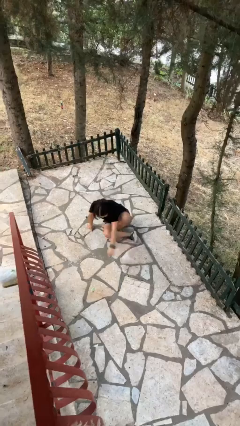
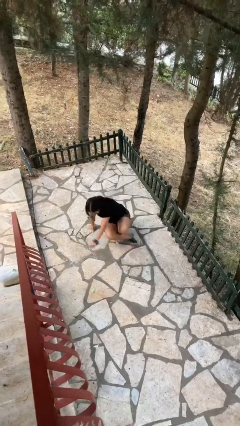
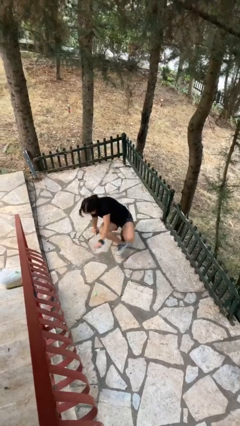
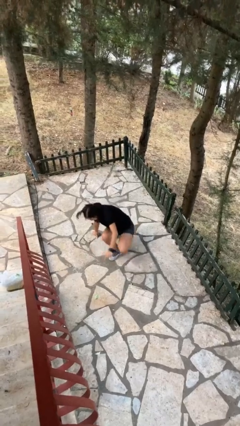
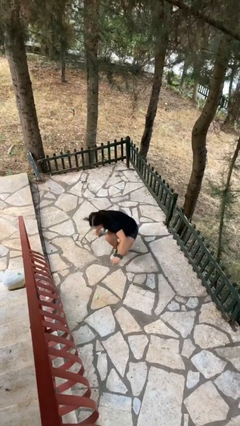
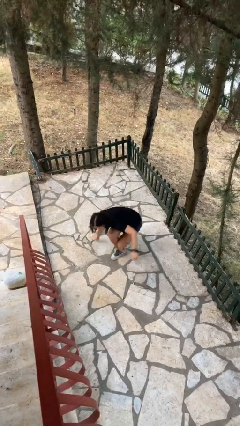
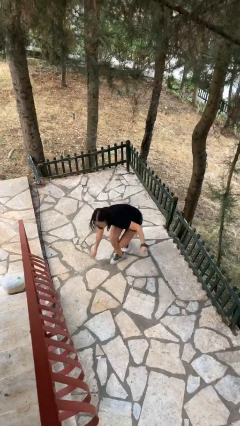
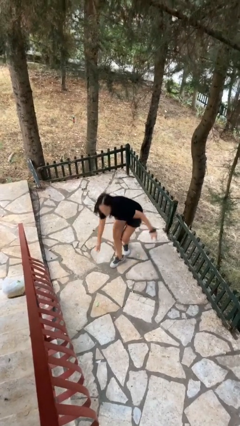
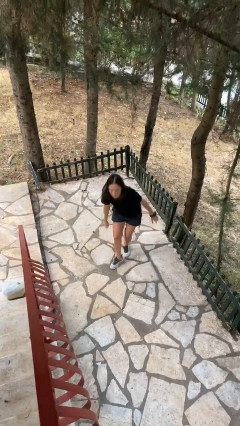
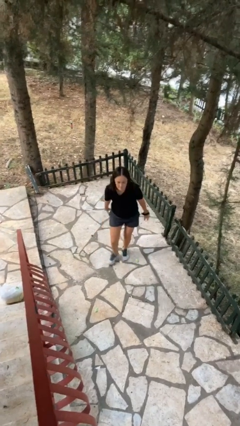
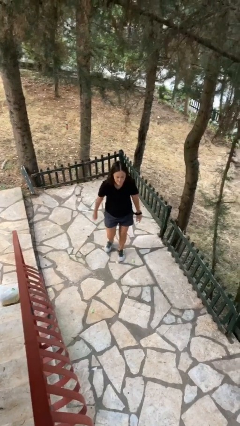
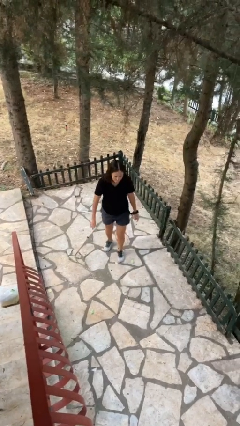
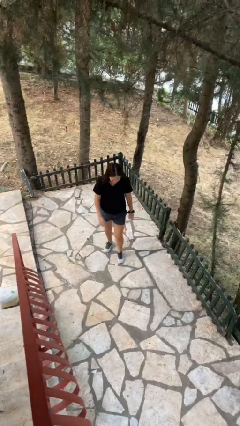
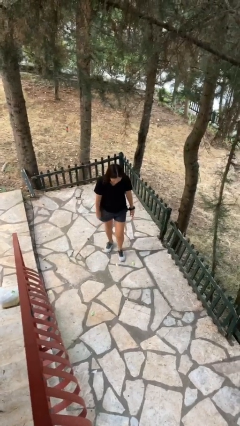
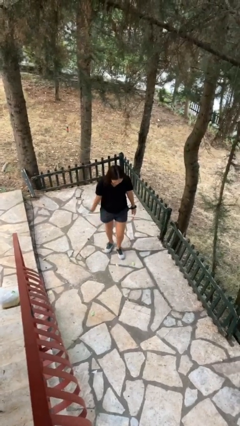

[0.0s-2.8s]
person stands up from floor

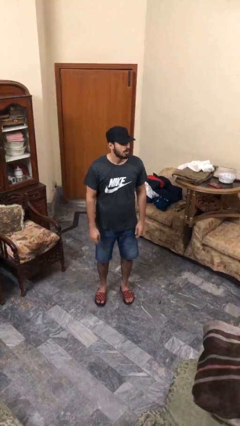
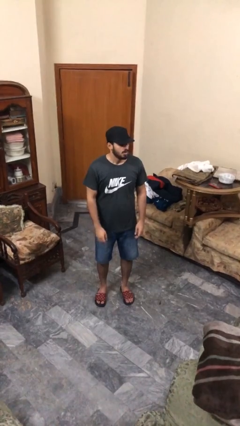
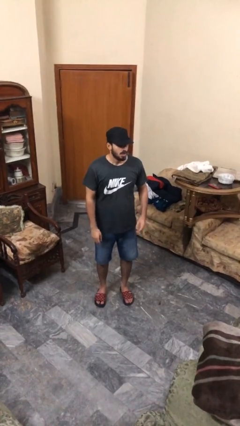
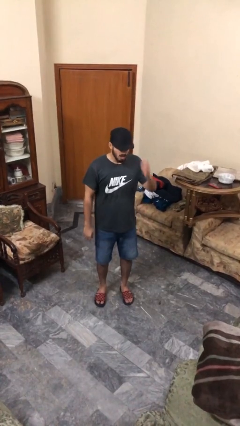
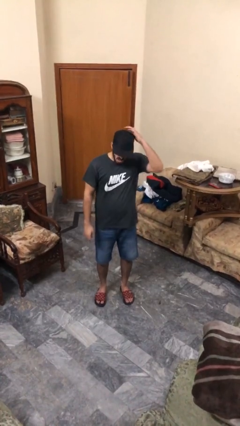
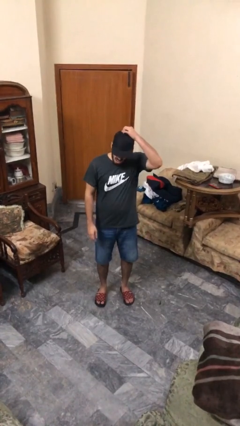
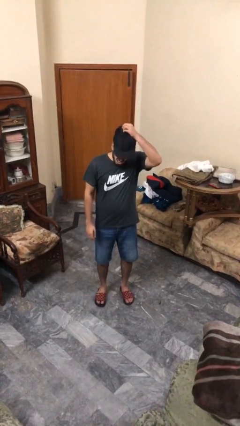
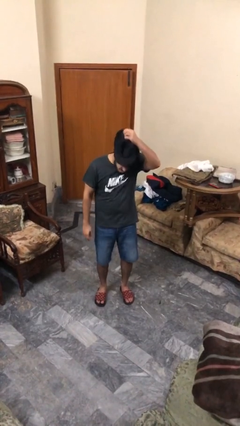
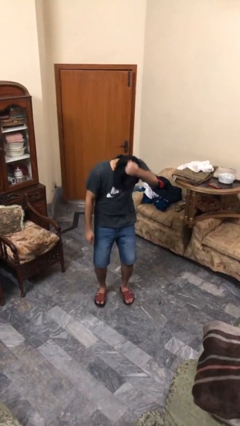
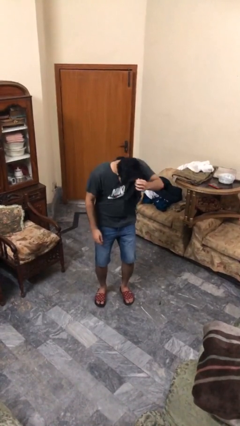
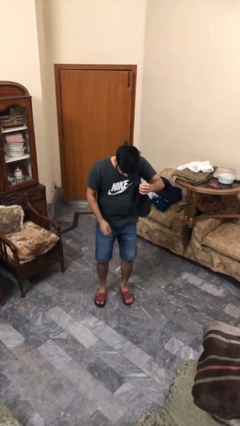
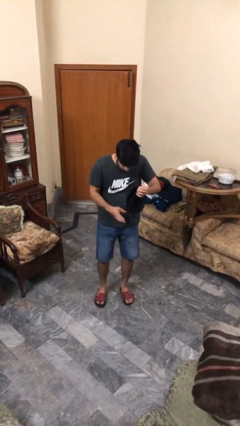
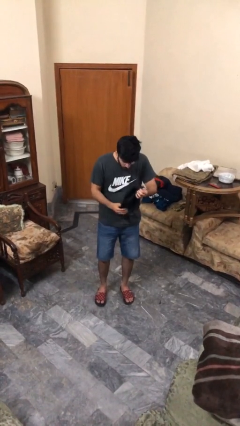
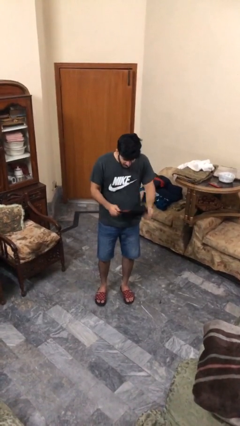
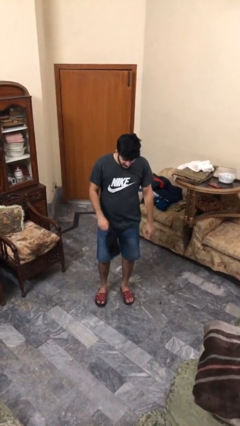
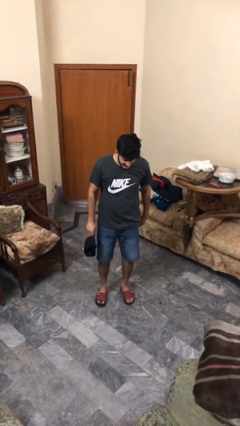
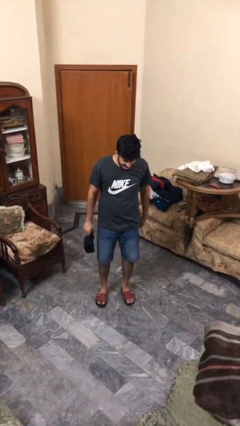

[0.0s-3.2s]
person takes off hat

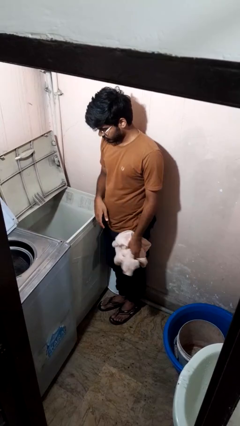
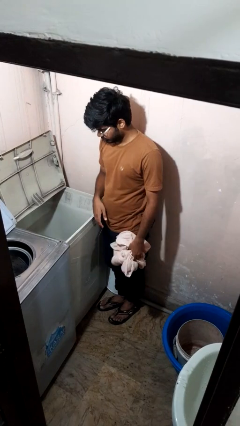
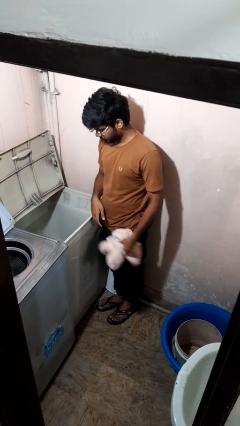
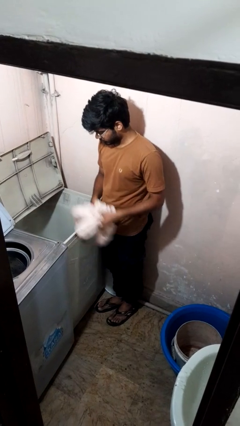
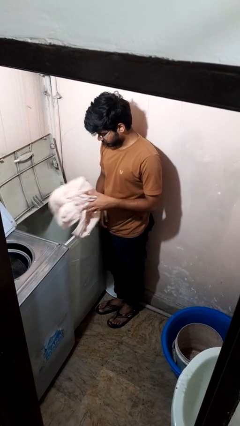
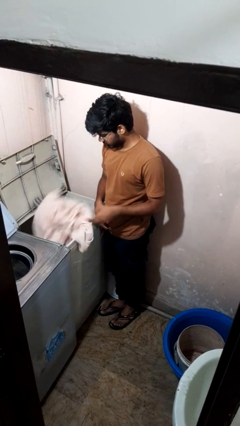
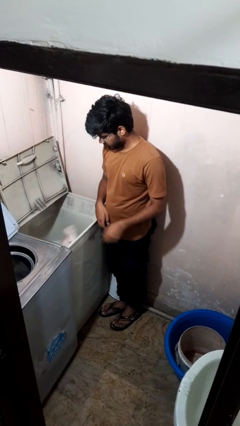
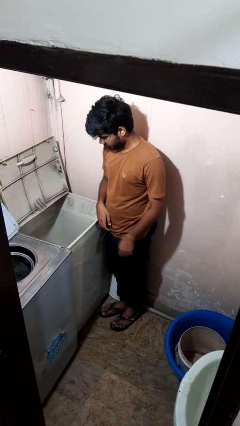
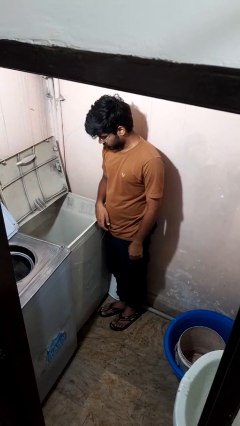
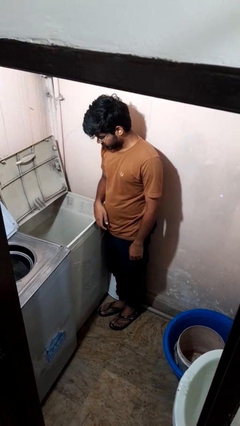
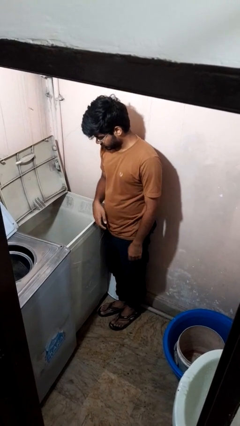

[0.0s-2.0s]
person loads clotheswasher

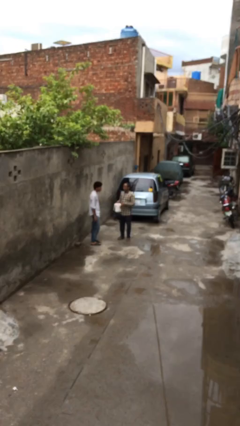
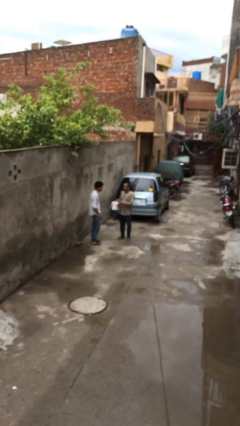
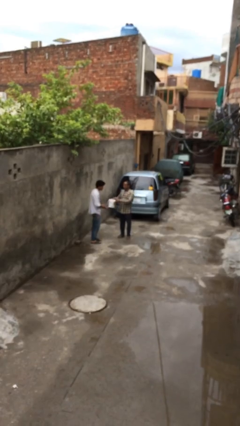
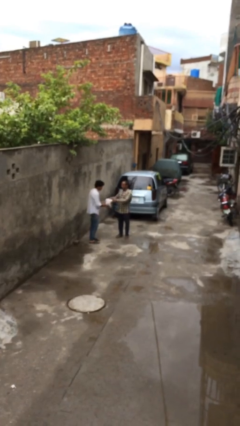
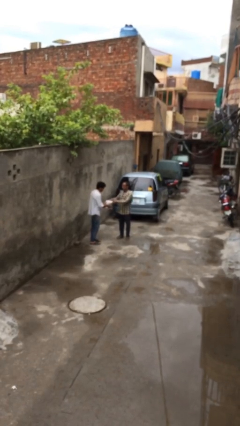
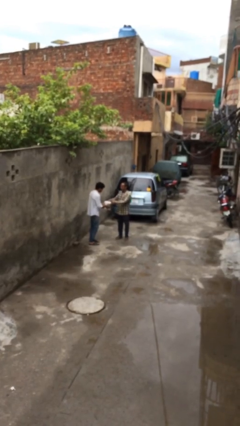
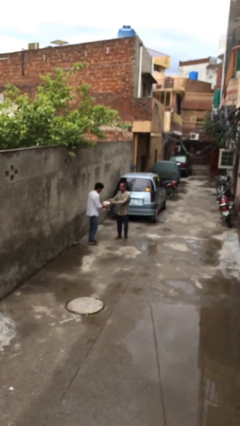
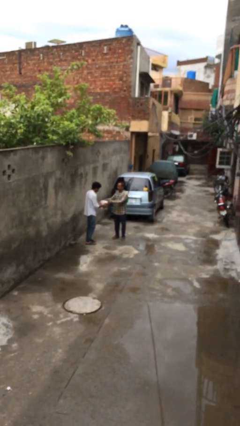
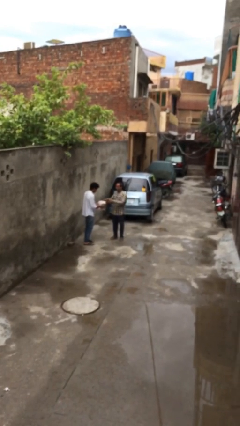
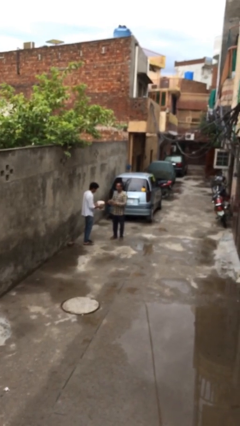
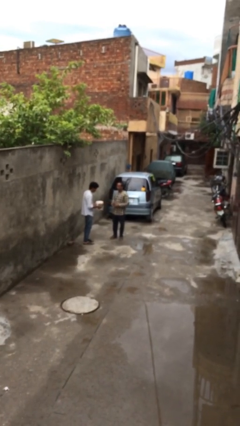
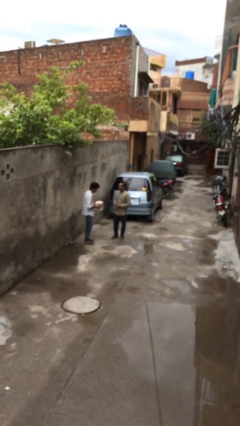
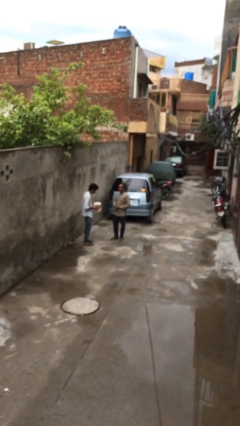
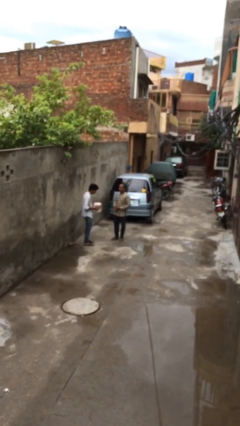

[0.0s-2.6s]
person transfers object to person

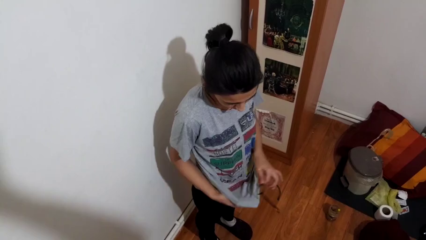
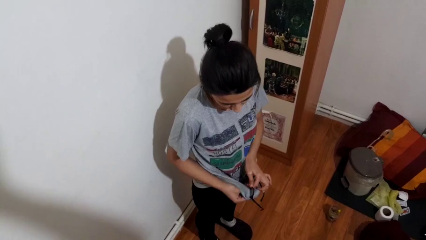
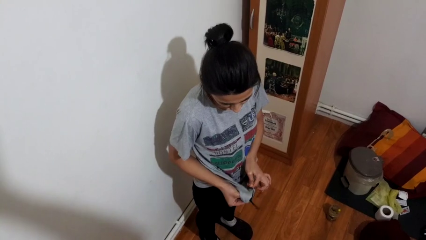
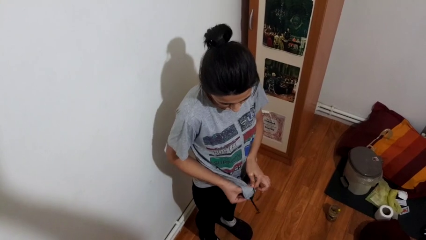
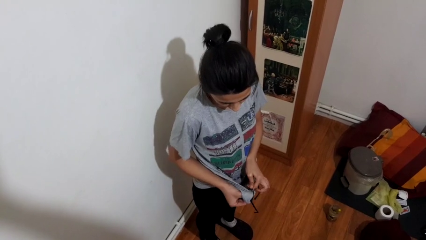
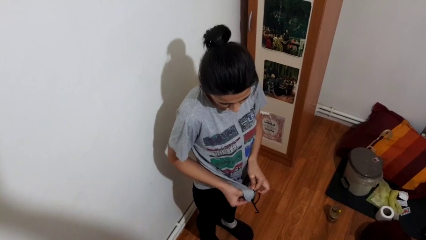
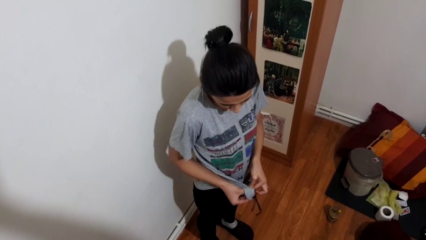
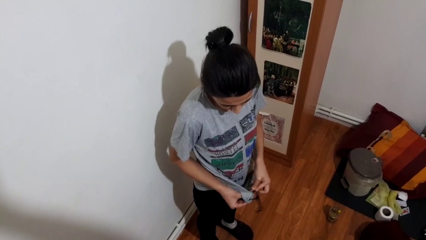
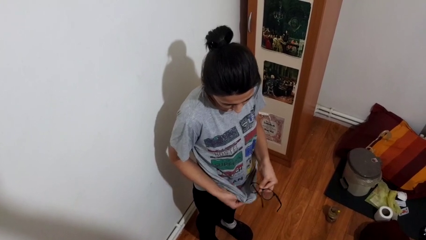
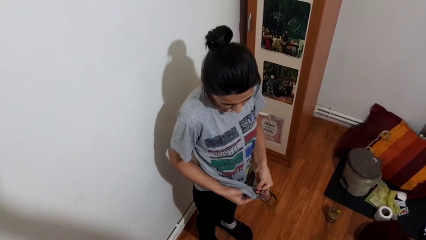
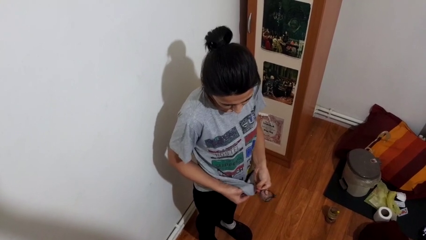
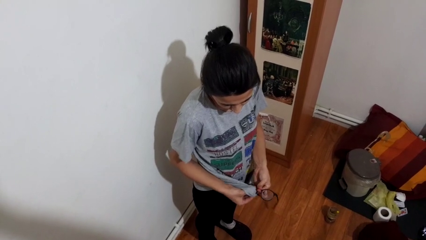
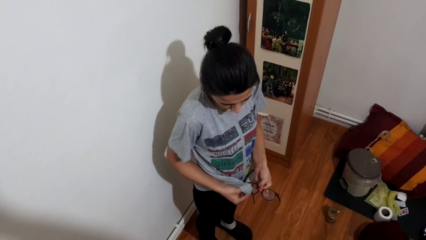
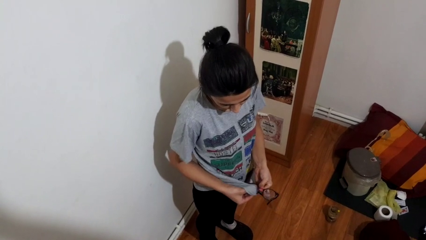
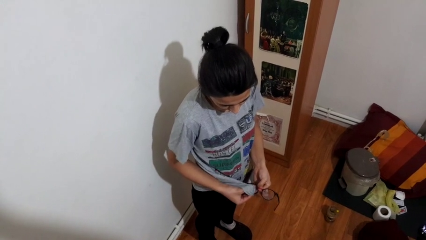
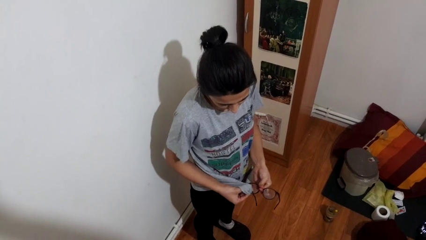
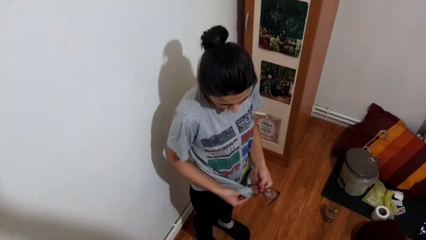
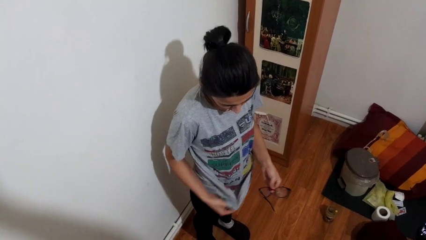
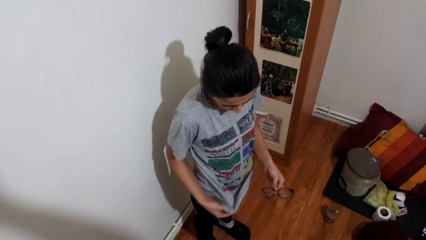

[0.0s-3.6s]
person cleans eyeglasses

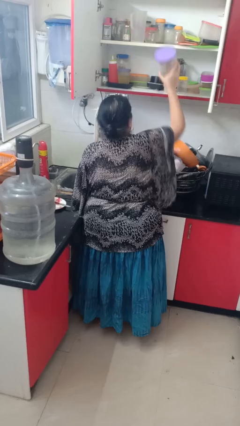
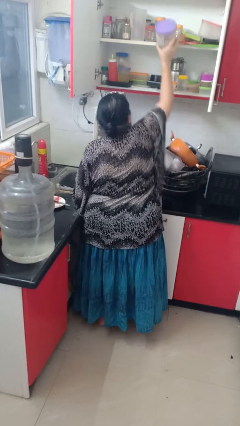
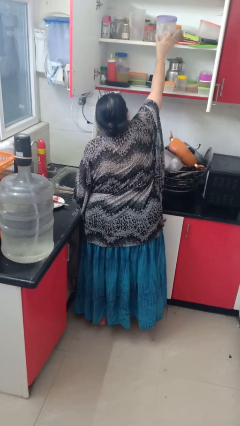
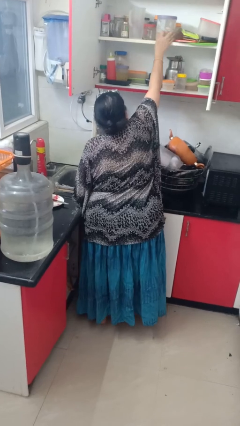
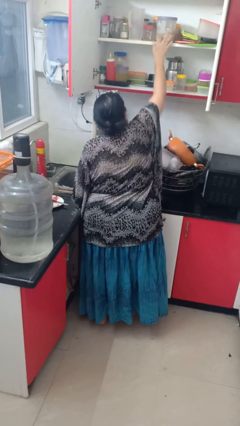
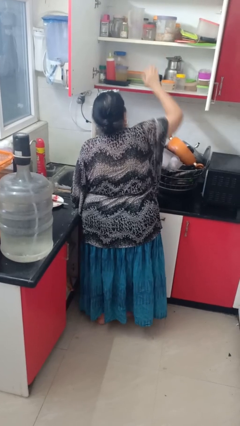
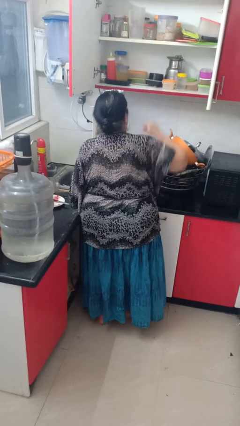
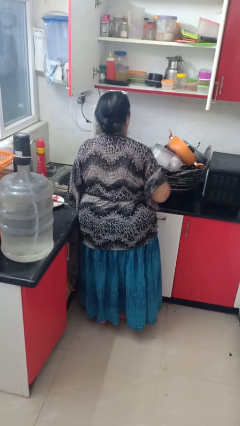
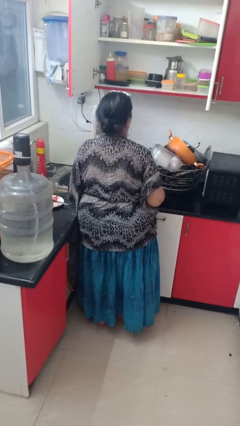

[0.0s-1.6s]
person takes object from cabinet

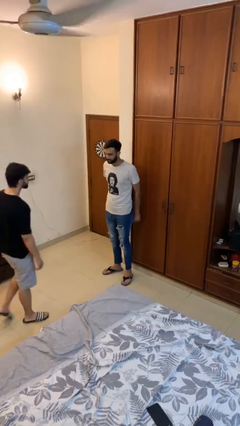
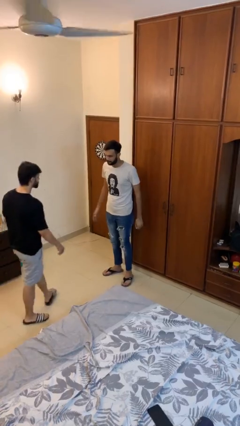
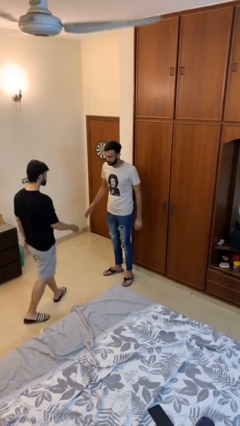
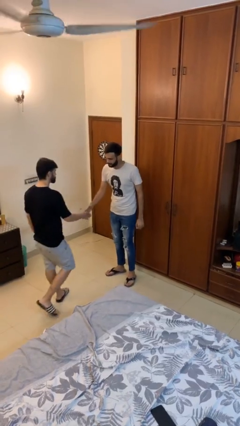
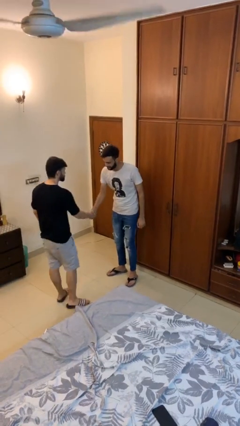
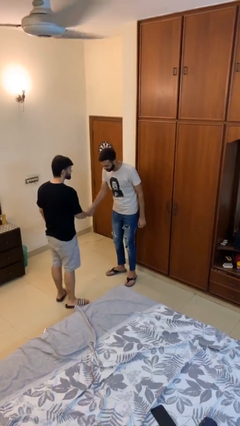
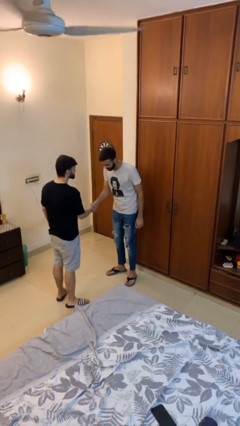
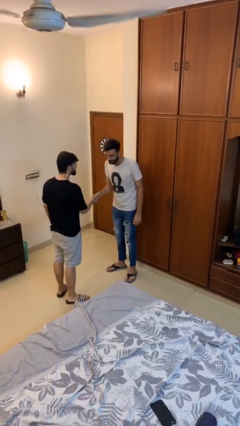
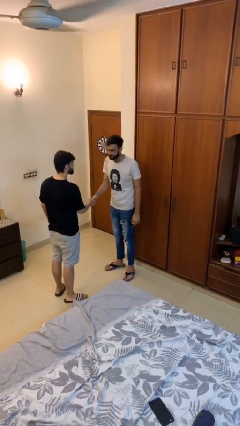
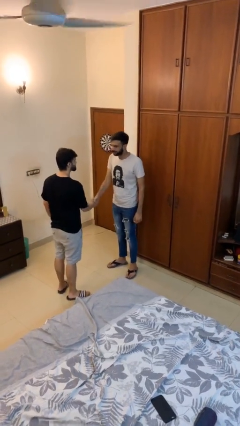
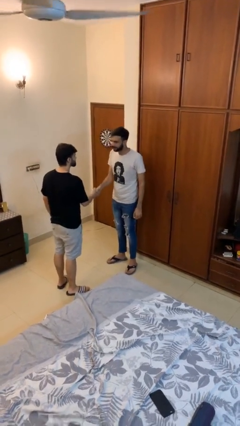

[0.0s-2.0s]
person shakes hand
